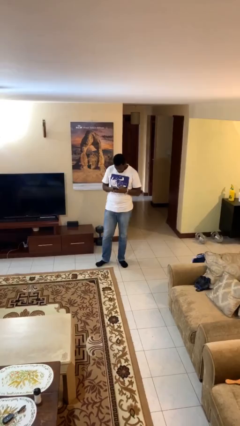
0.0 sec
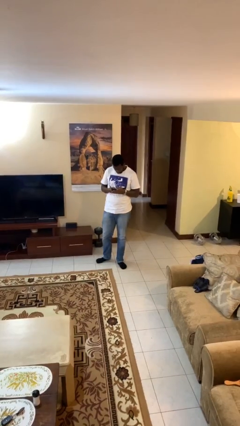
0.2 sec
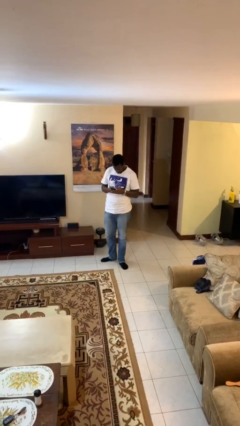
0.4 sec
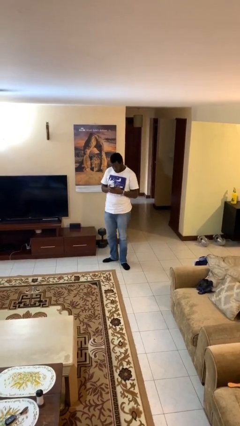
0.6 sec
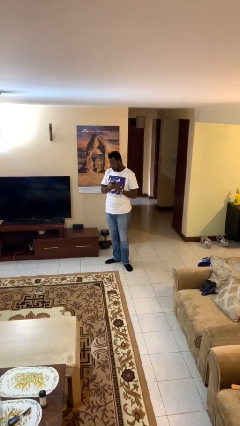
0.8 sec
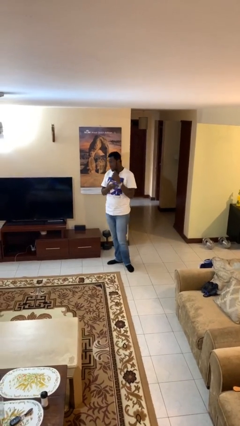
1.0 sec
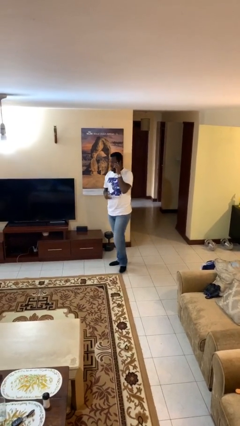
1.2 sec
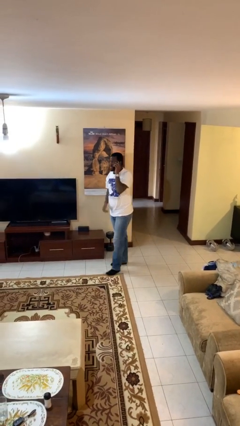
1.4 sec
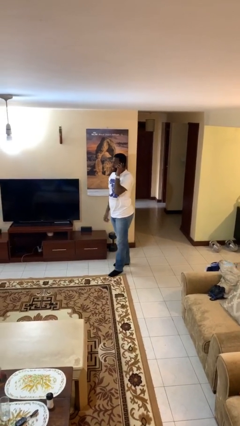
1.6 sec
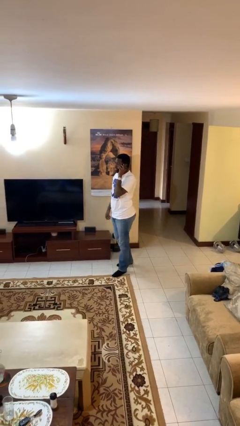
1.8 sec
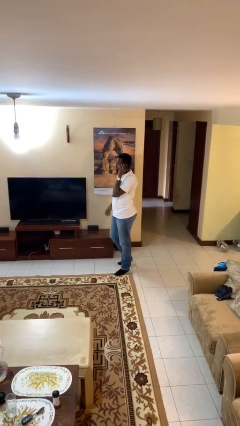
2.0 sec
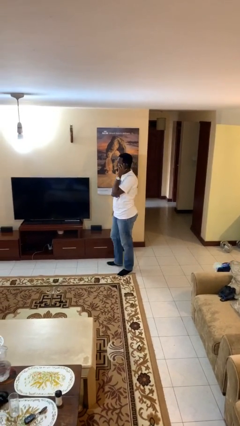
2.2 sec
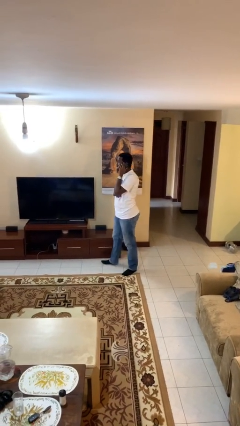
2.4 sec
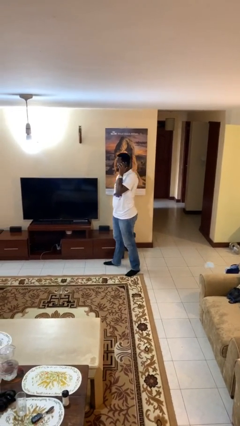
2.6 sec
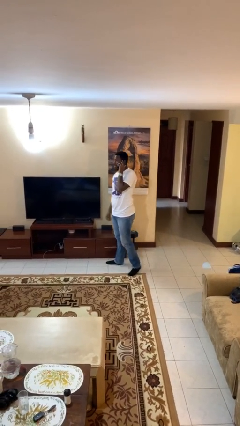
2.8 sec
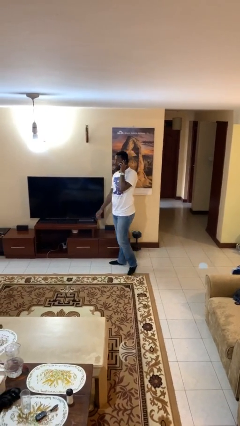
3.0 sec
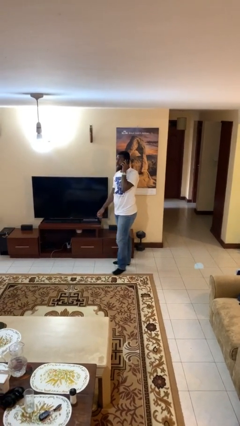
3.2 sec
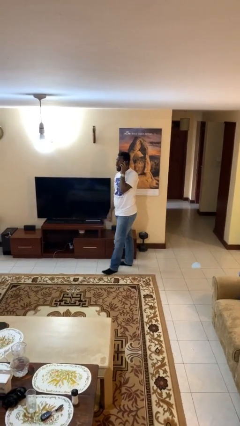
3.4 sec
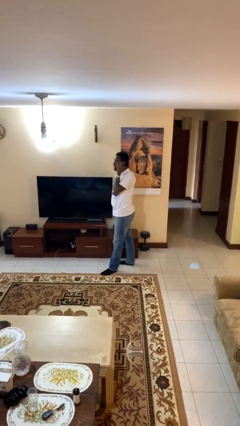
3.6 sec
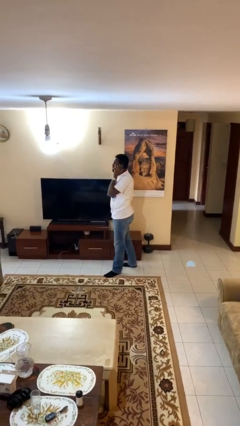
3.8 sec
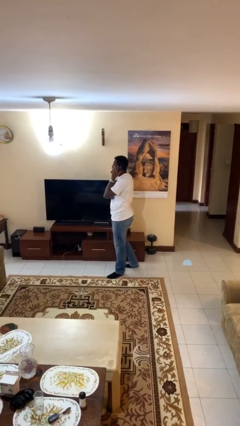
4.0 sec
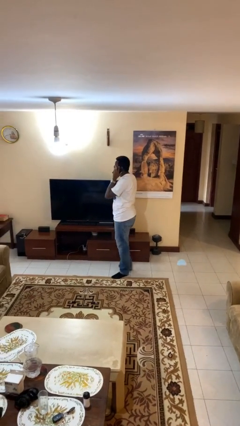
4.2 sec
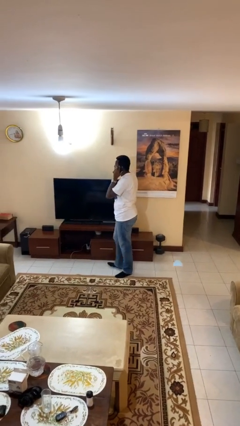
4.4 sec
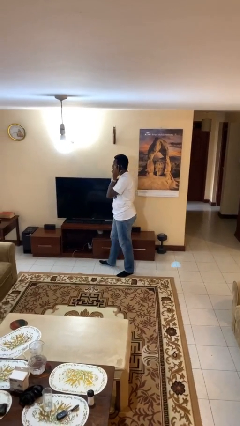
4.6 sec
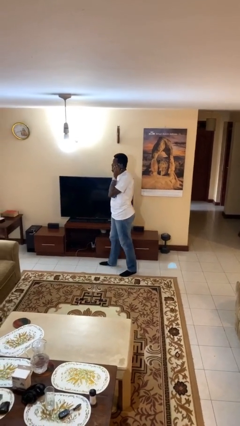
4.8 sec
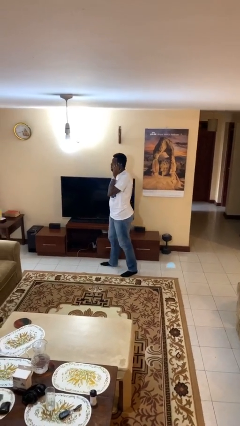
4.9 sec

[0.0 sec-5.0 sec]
person talks on phone

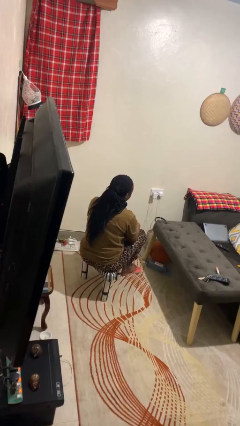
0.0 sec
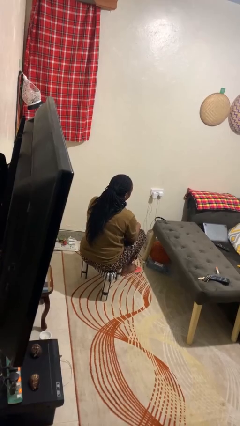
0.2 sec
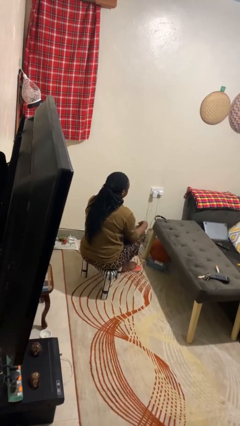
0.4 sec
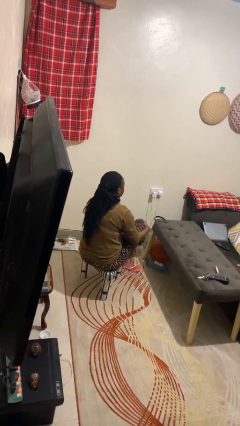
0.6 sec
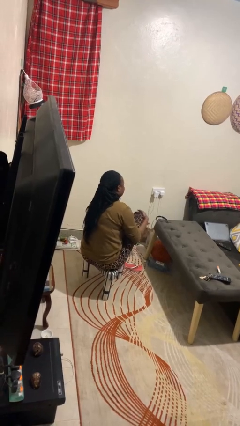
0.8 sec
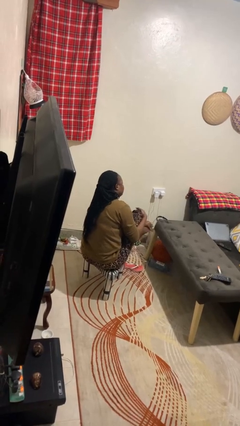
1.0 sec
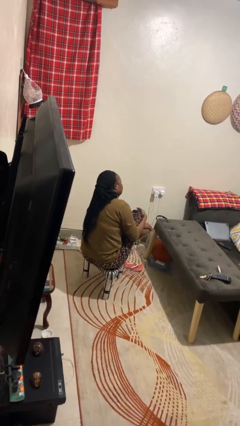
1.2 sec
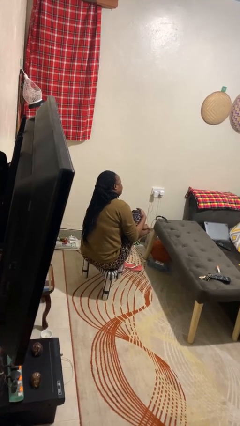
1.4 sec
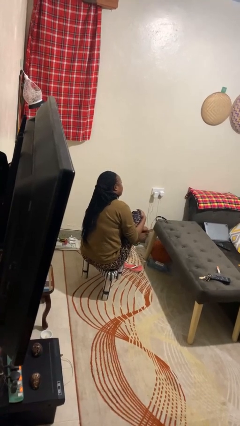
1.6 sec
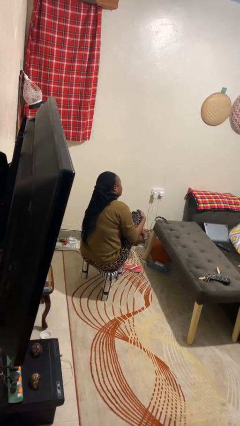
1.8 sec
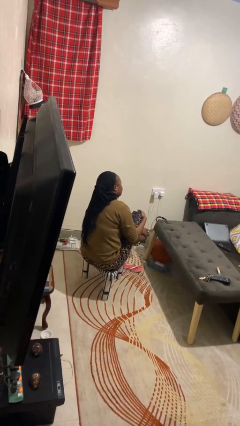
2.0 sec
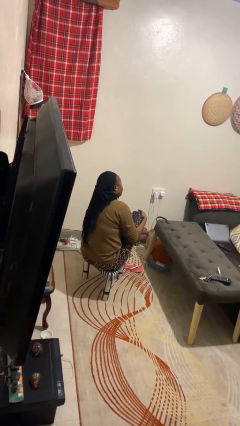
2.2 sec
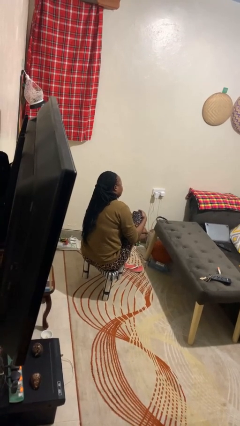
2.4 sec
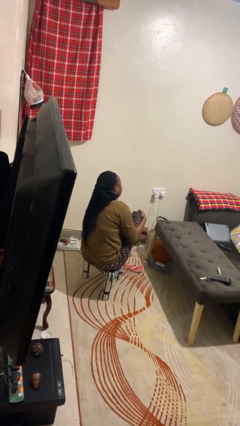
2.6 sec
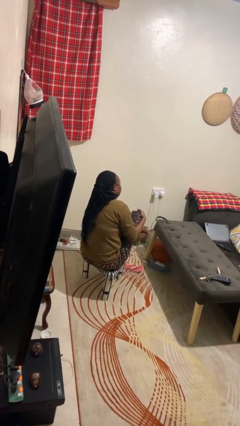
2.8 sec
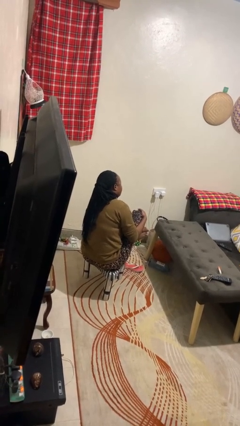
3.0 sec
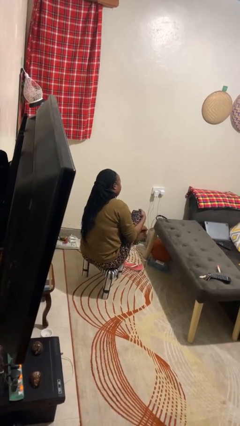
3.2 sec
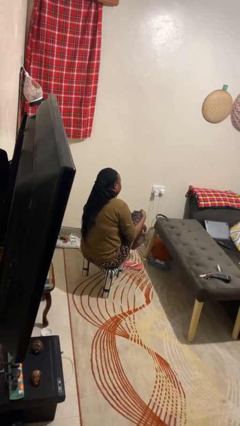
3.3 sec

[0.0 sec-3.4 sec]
person rubs foot

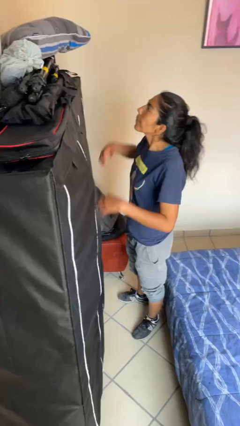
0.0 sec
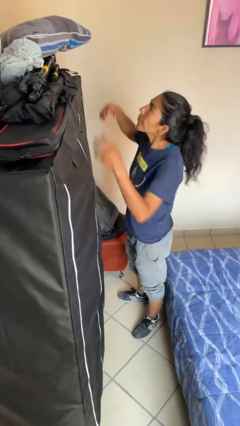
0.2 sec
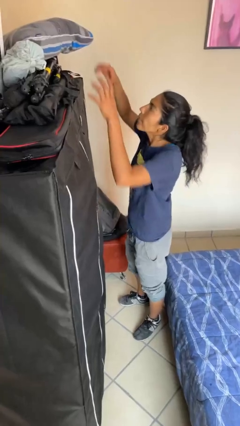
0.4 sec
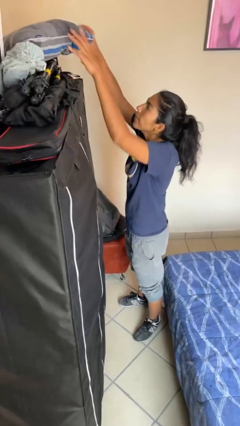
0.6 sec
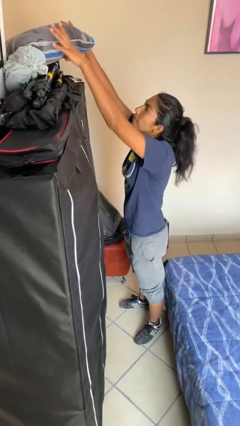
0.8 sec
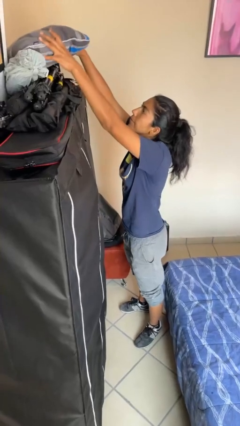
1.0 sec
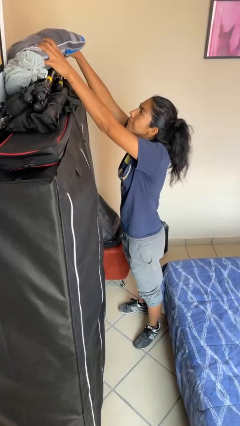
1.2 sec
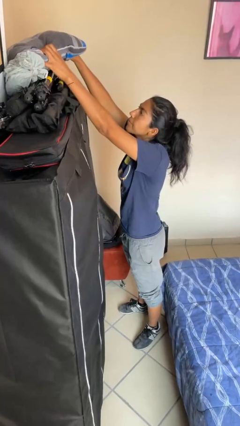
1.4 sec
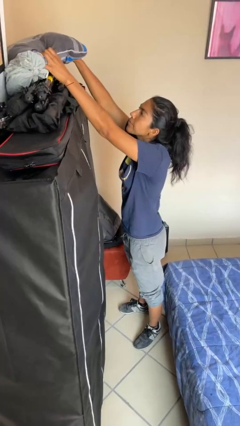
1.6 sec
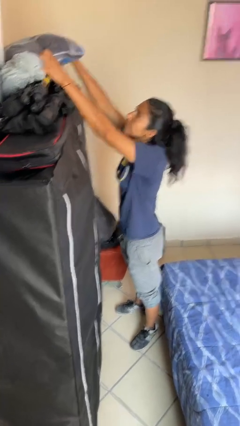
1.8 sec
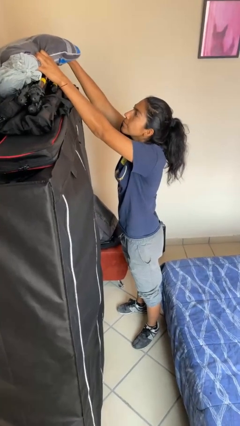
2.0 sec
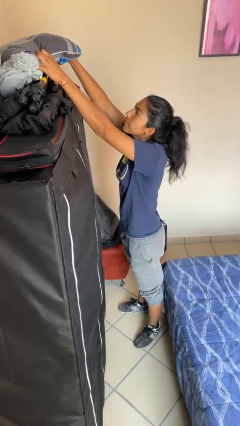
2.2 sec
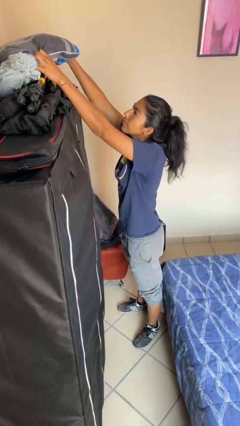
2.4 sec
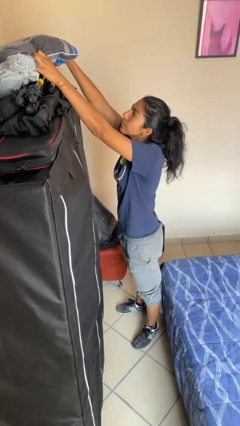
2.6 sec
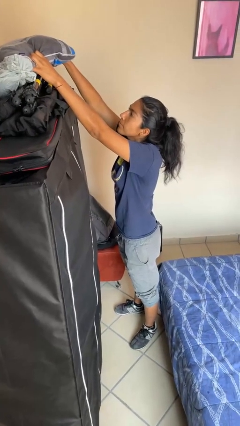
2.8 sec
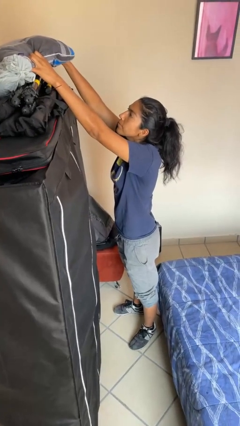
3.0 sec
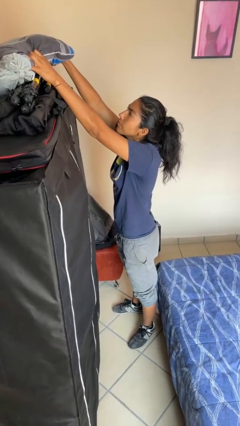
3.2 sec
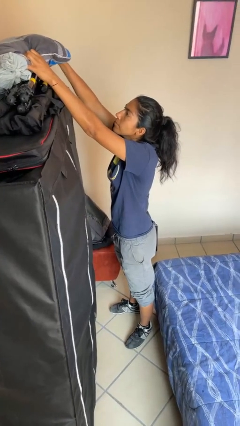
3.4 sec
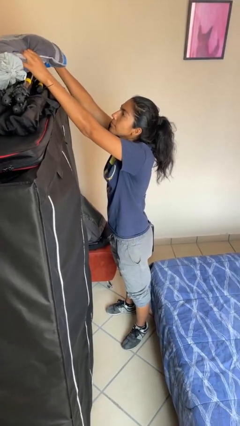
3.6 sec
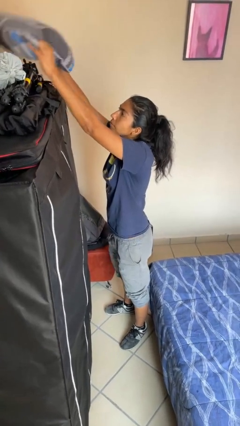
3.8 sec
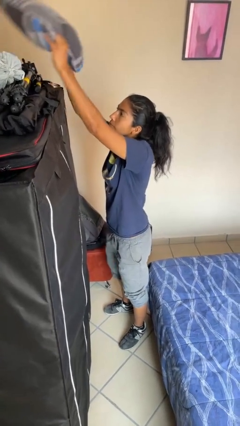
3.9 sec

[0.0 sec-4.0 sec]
person picks up object from shelf

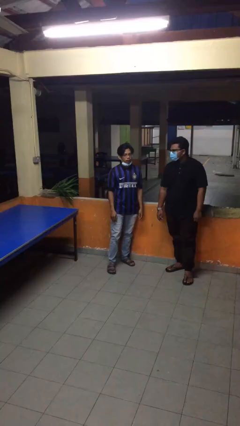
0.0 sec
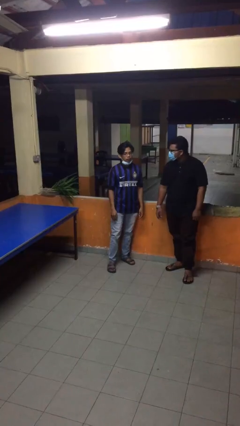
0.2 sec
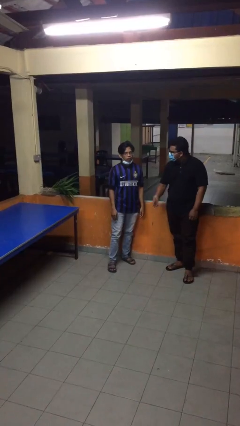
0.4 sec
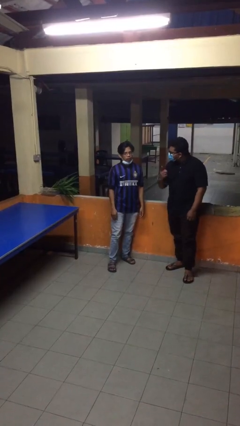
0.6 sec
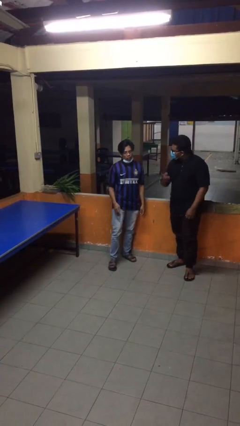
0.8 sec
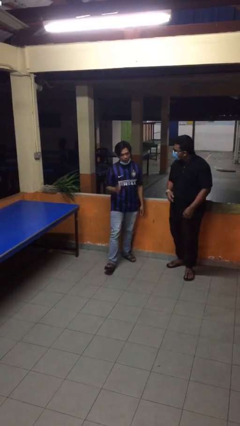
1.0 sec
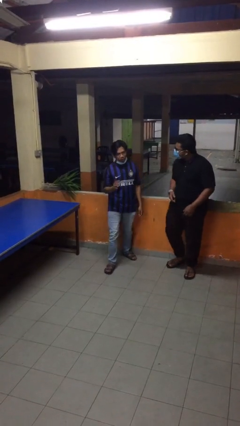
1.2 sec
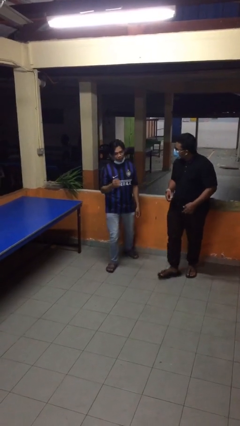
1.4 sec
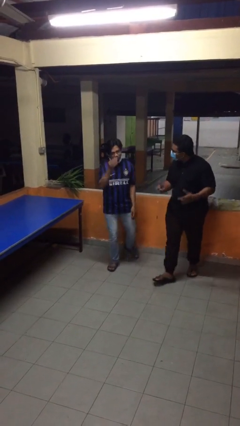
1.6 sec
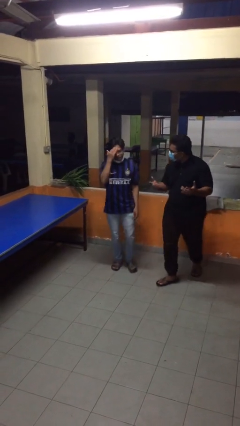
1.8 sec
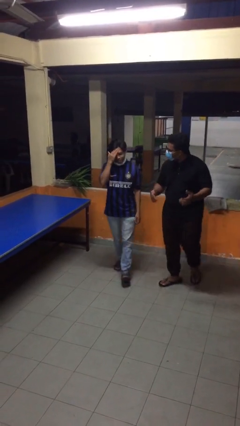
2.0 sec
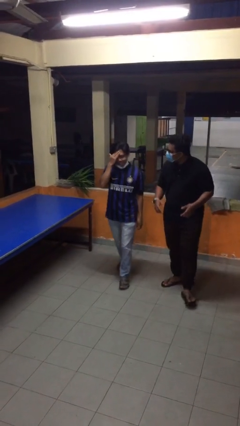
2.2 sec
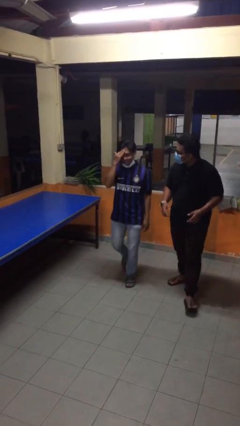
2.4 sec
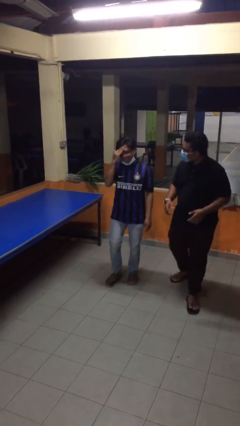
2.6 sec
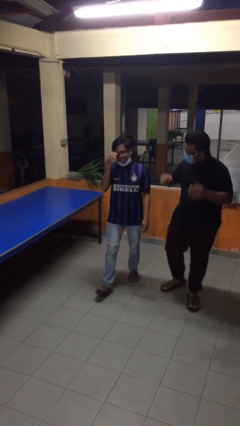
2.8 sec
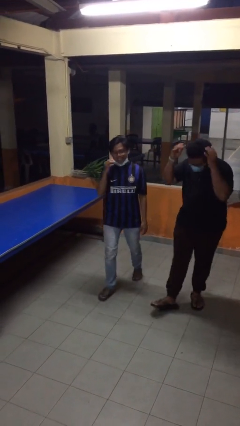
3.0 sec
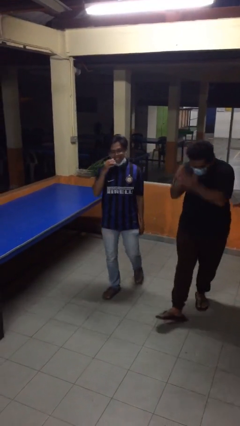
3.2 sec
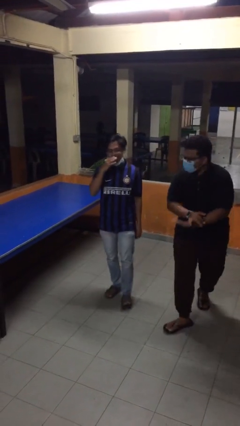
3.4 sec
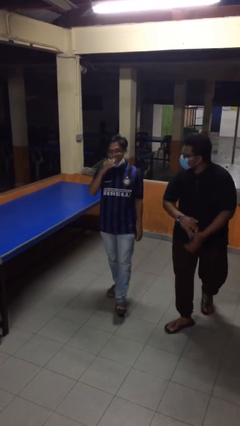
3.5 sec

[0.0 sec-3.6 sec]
person talks to person

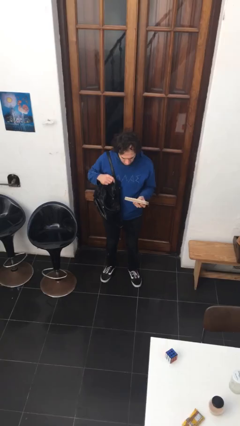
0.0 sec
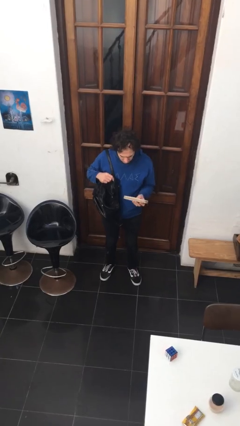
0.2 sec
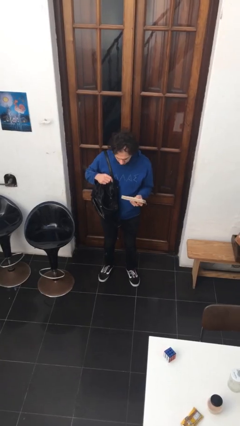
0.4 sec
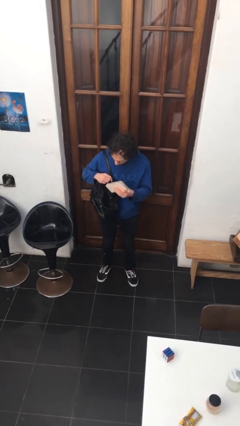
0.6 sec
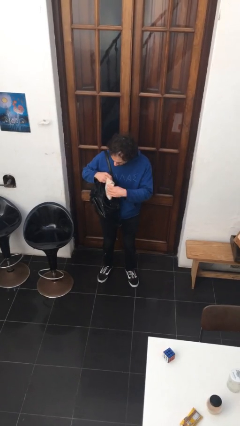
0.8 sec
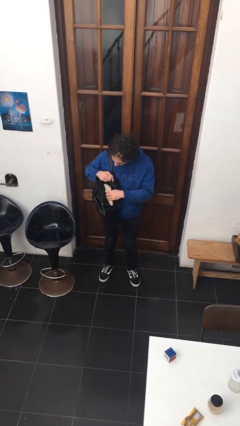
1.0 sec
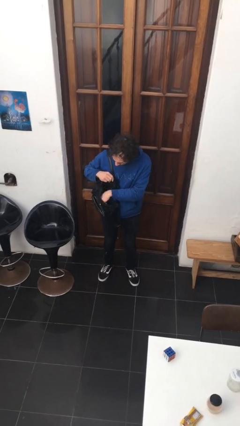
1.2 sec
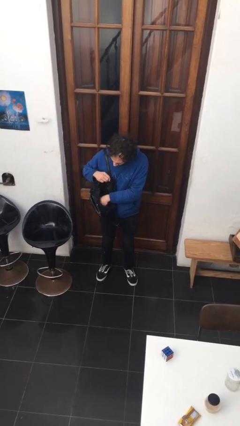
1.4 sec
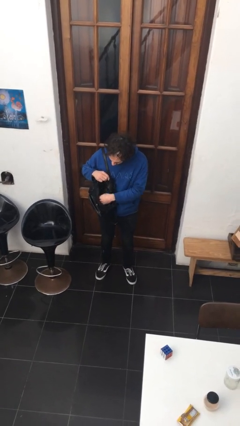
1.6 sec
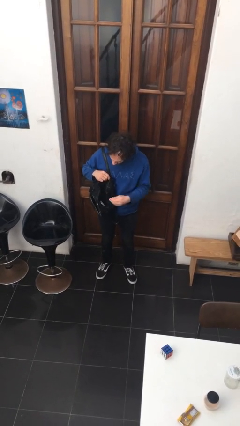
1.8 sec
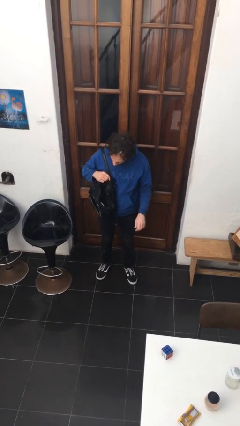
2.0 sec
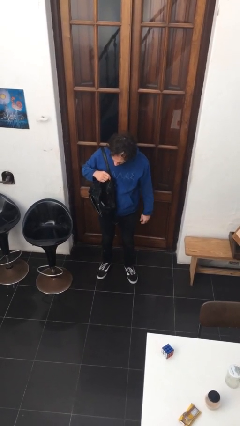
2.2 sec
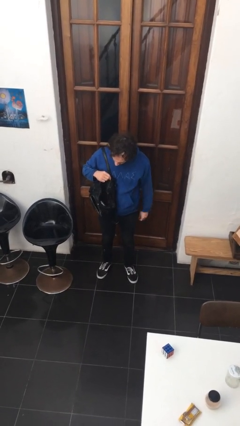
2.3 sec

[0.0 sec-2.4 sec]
person puts object into purse
